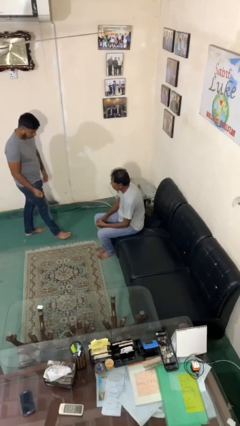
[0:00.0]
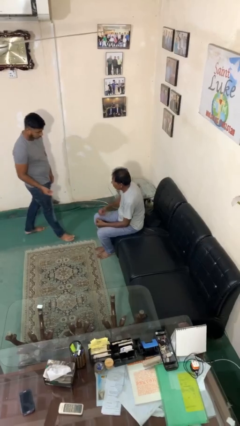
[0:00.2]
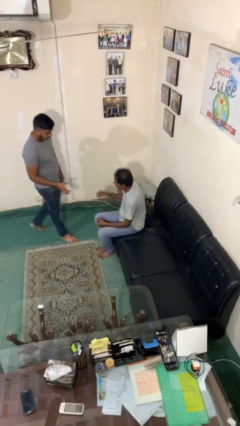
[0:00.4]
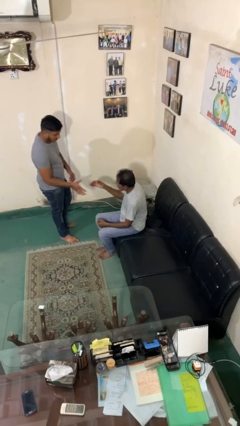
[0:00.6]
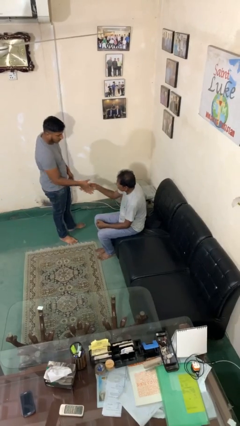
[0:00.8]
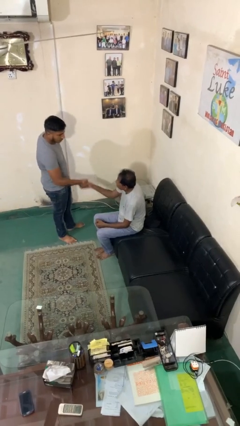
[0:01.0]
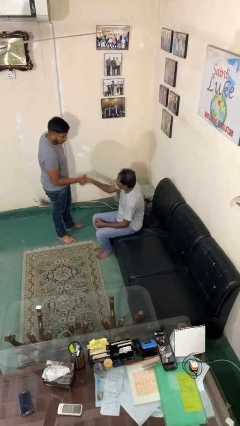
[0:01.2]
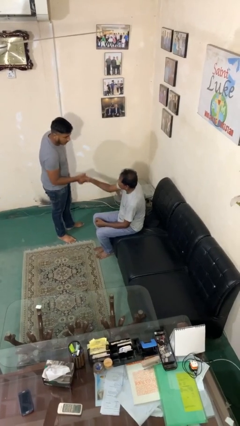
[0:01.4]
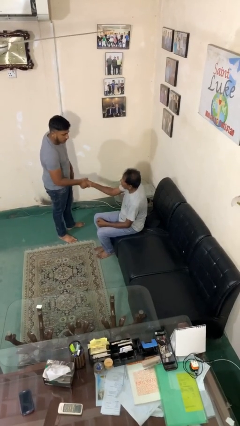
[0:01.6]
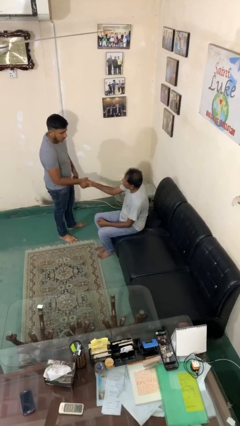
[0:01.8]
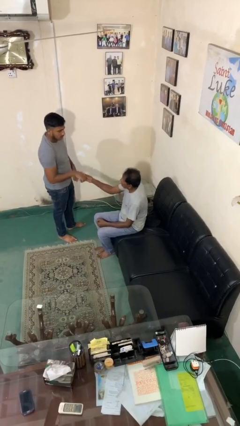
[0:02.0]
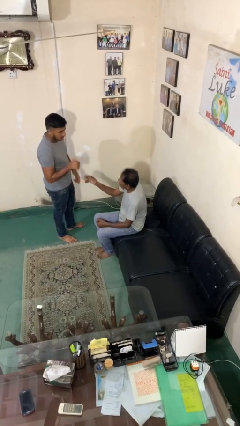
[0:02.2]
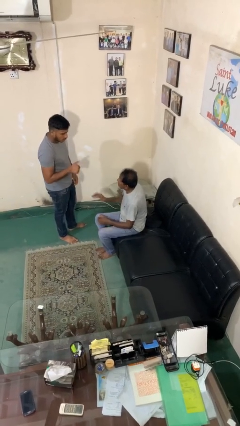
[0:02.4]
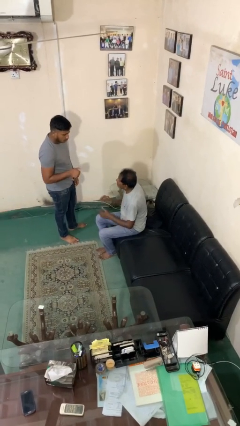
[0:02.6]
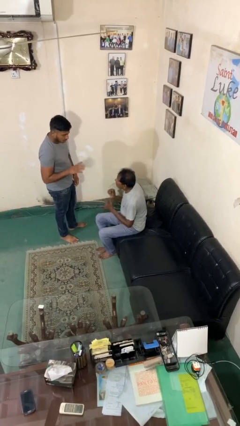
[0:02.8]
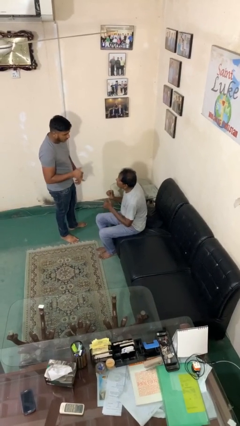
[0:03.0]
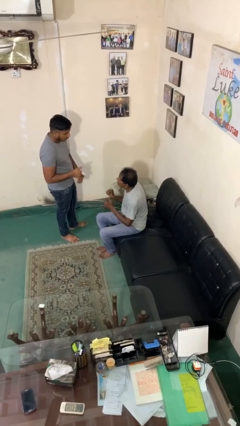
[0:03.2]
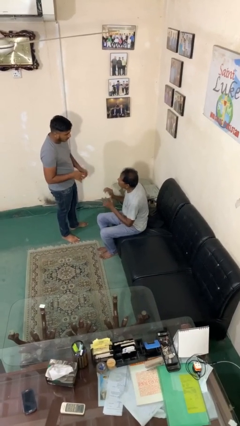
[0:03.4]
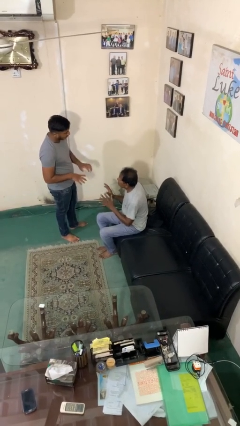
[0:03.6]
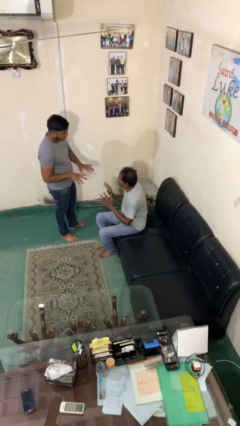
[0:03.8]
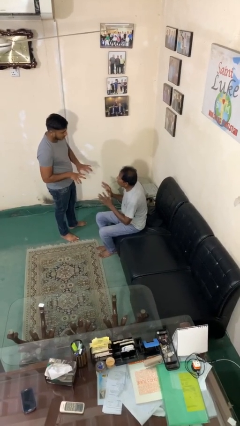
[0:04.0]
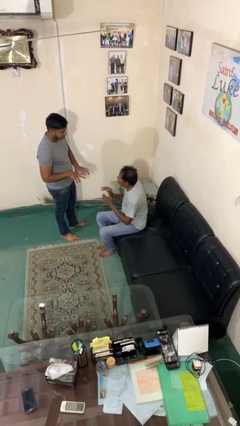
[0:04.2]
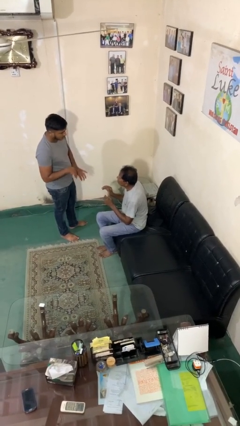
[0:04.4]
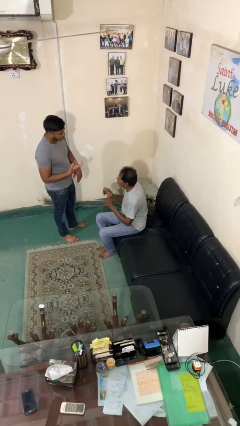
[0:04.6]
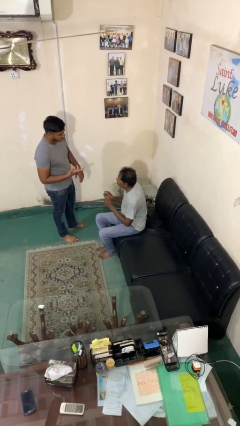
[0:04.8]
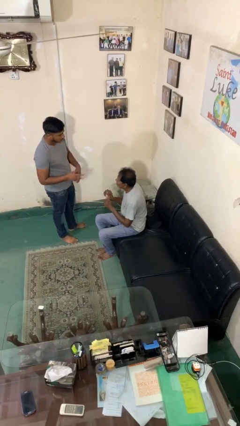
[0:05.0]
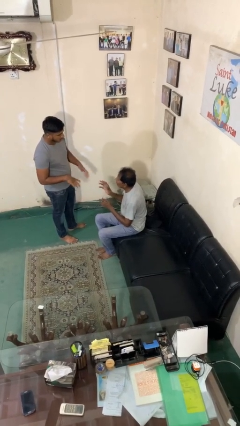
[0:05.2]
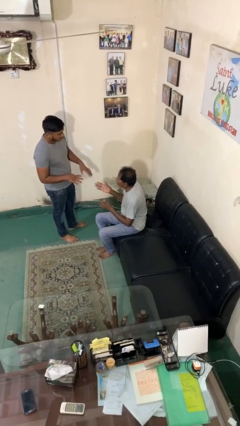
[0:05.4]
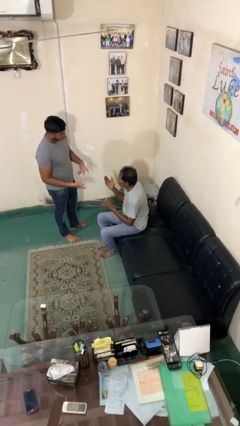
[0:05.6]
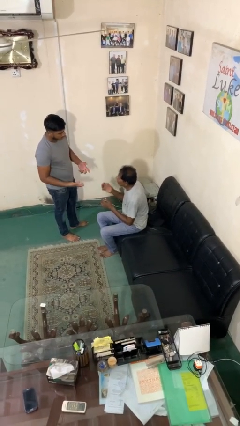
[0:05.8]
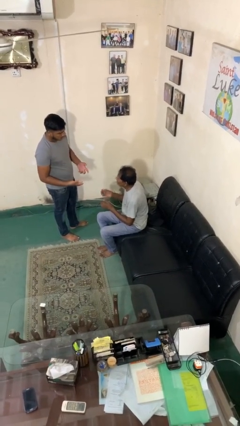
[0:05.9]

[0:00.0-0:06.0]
person shakes hand

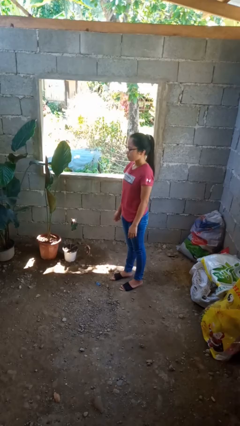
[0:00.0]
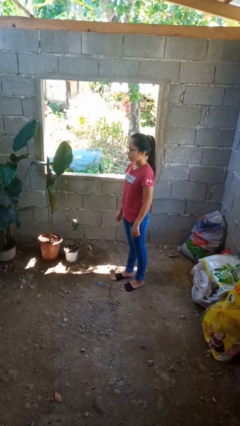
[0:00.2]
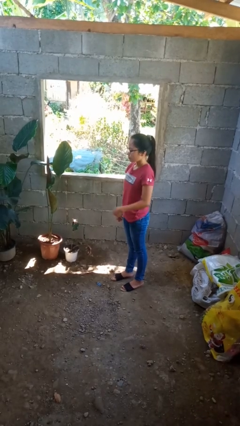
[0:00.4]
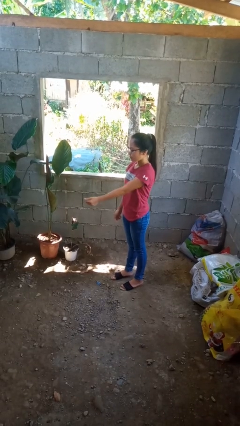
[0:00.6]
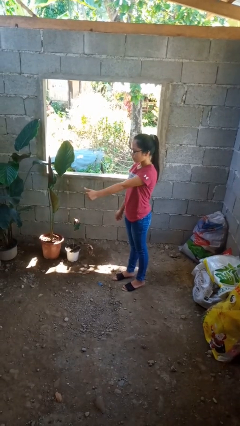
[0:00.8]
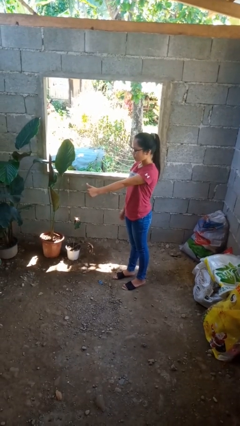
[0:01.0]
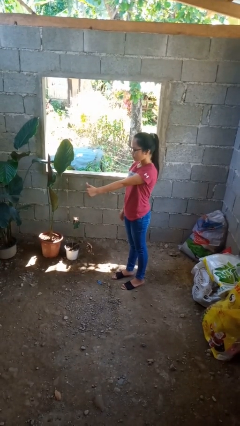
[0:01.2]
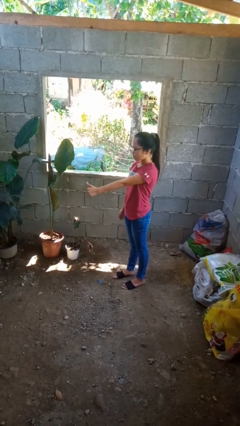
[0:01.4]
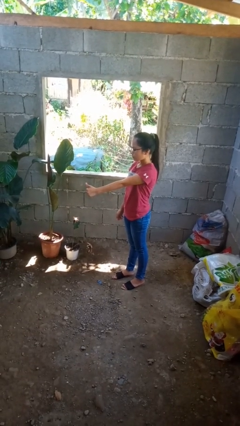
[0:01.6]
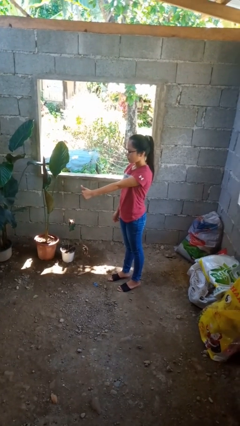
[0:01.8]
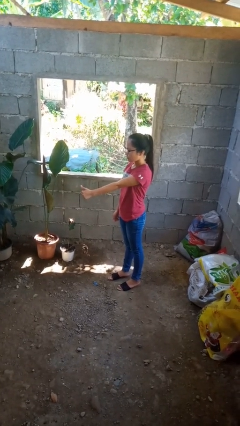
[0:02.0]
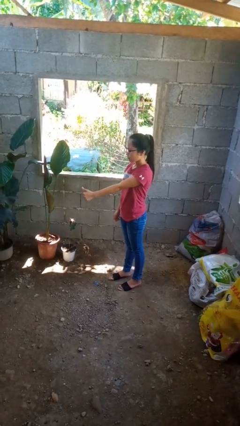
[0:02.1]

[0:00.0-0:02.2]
person gestures thumbs up

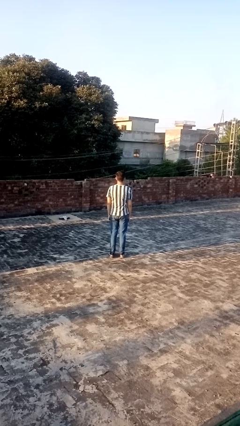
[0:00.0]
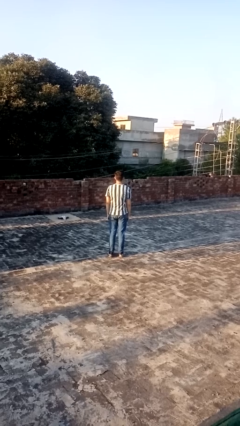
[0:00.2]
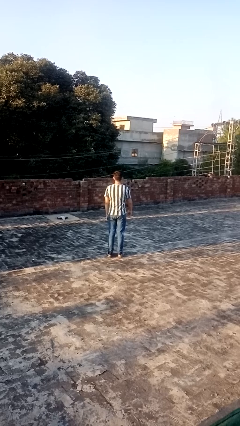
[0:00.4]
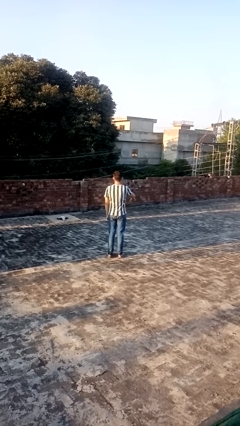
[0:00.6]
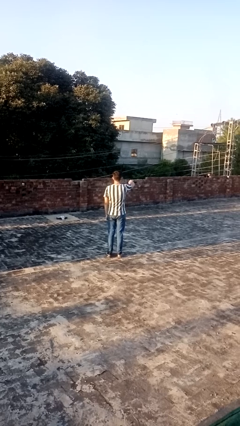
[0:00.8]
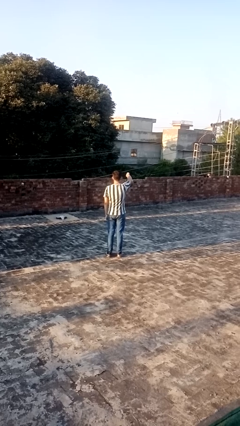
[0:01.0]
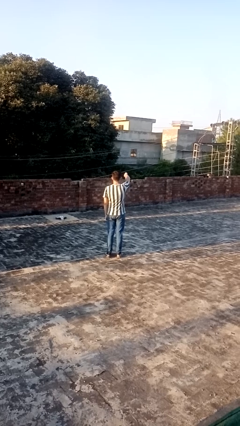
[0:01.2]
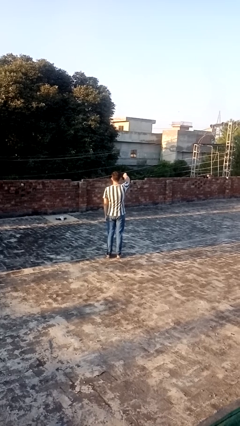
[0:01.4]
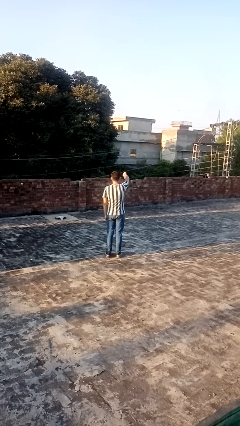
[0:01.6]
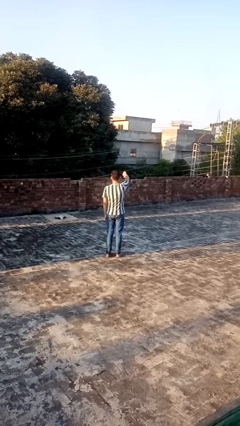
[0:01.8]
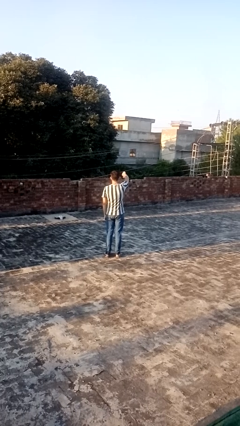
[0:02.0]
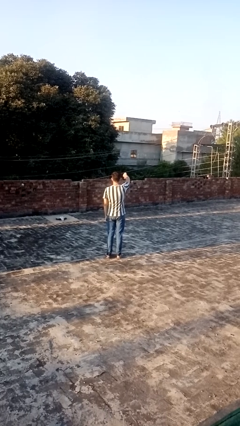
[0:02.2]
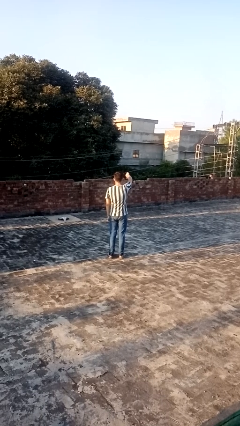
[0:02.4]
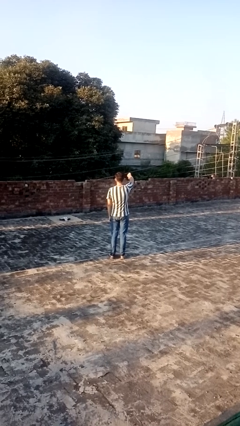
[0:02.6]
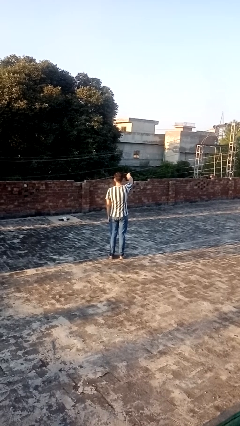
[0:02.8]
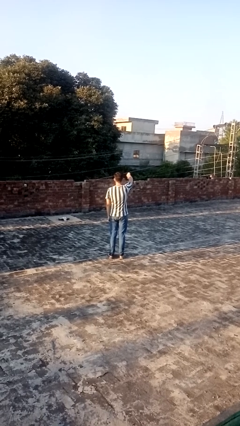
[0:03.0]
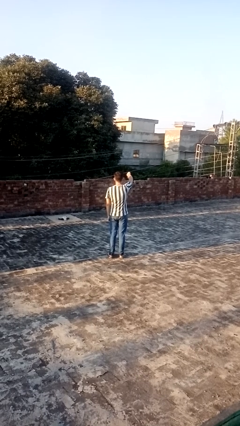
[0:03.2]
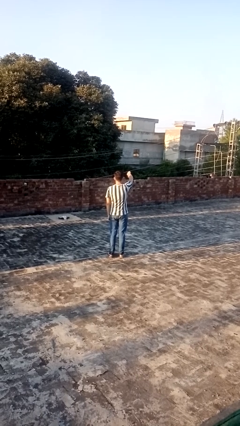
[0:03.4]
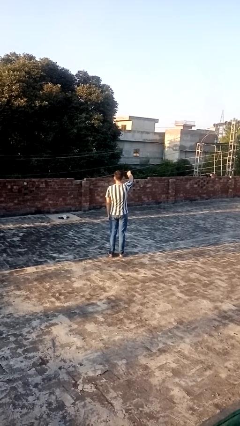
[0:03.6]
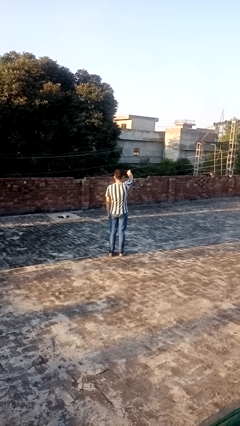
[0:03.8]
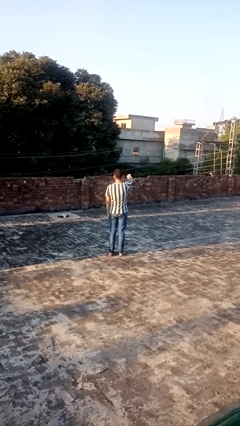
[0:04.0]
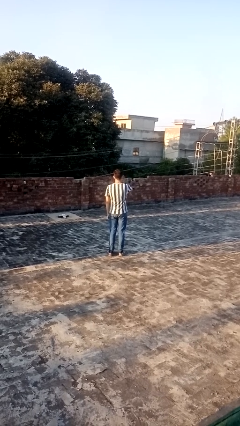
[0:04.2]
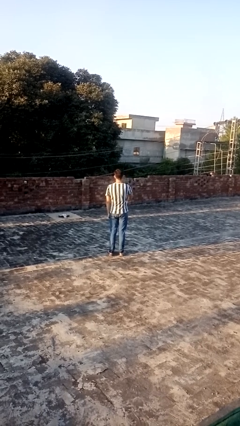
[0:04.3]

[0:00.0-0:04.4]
person gestures thumbs down

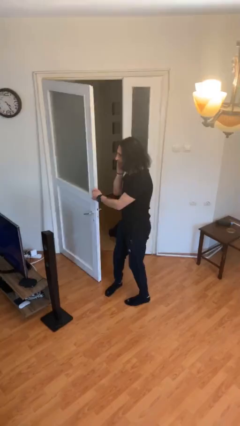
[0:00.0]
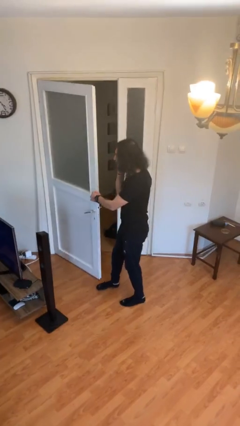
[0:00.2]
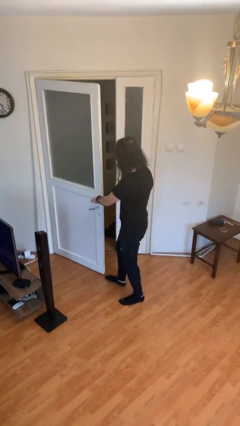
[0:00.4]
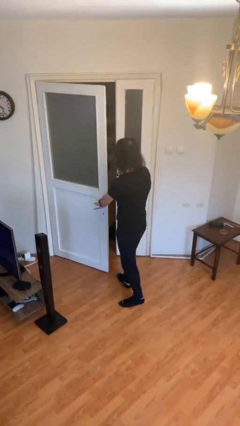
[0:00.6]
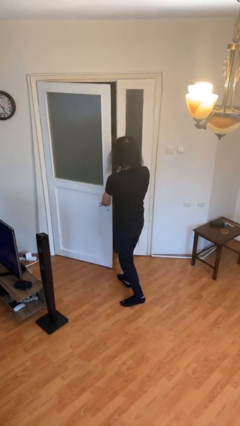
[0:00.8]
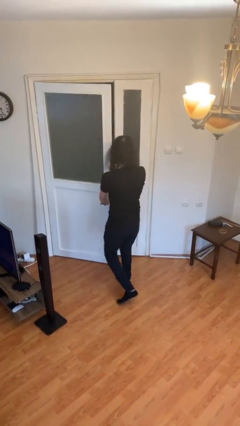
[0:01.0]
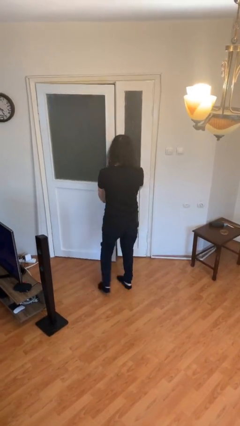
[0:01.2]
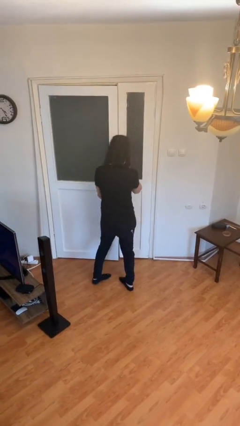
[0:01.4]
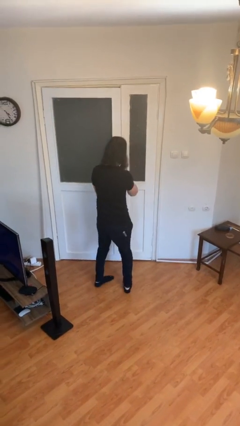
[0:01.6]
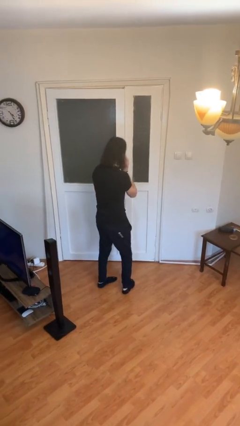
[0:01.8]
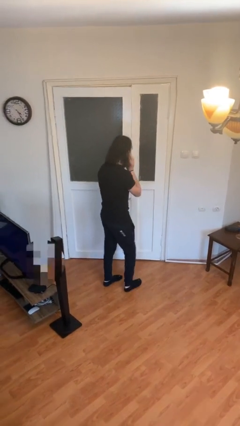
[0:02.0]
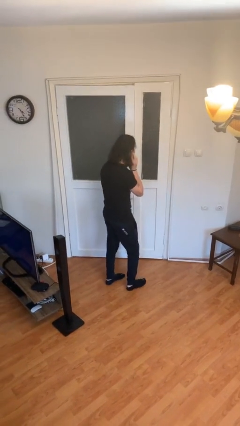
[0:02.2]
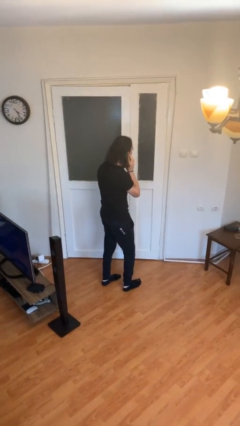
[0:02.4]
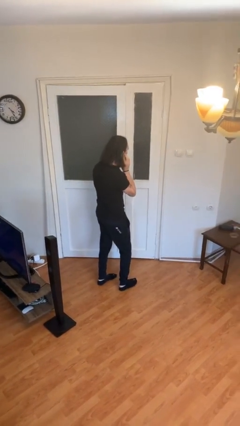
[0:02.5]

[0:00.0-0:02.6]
person closes facility door

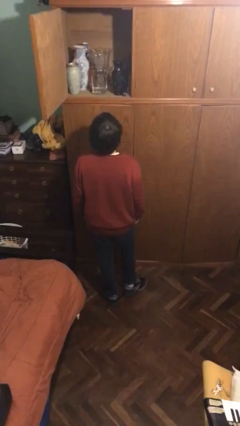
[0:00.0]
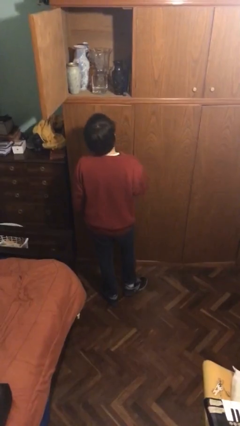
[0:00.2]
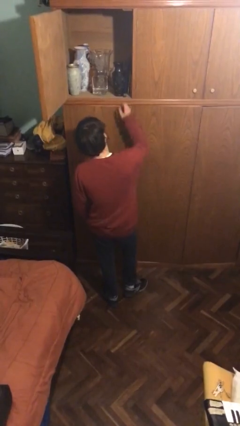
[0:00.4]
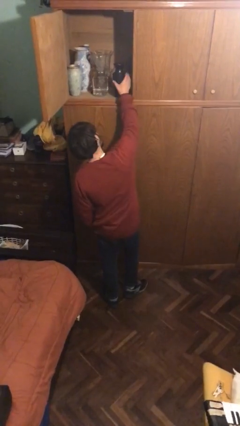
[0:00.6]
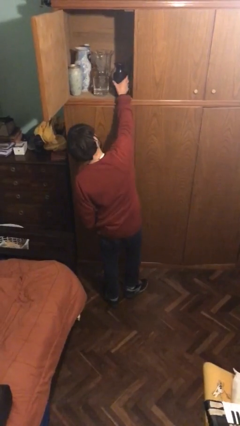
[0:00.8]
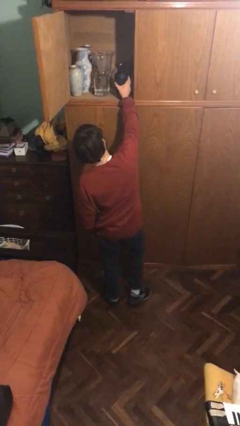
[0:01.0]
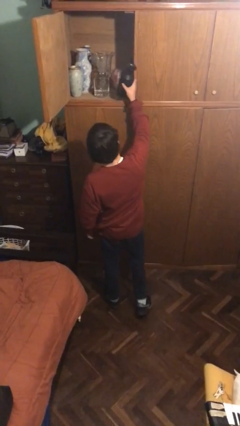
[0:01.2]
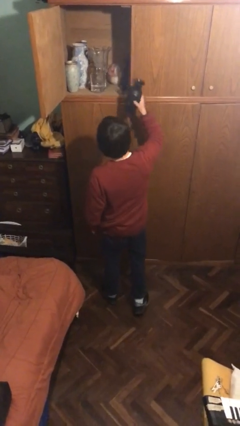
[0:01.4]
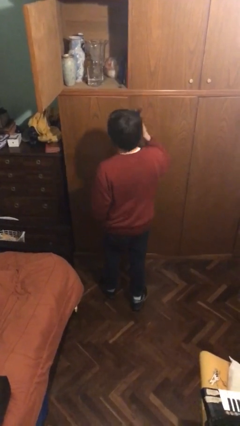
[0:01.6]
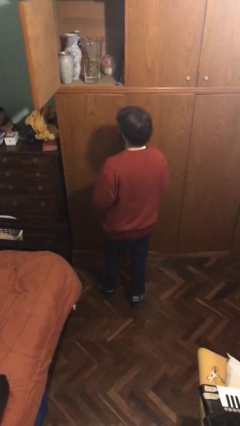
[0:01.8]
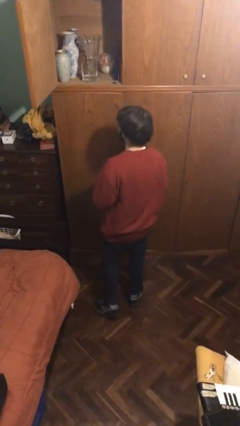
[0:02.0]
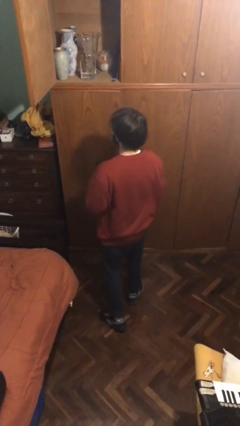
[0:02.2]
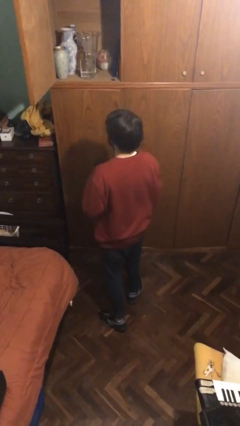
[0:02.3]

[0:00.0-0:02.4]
person picks up object from cabinet

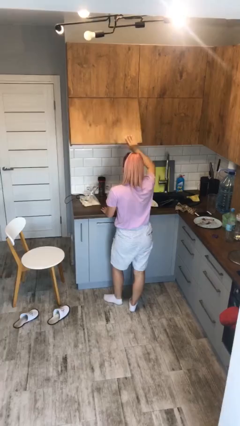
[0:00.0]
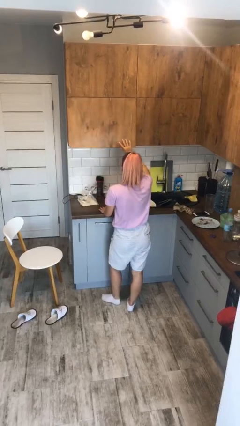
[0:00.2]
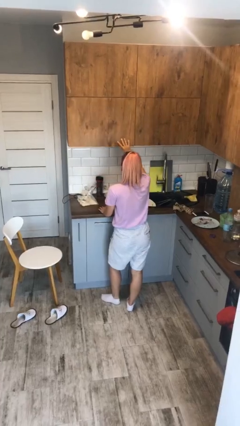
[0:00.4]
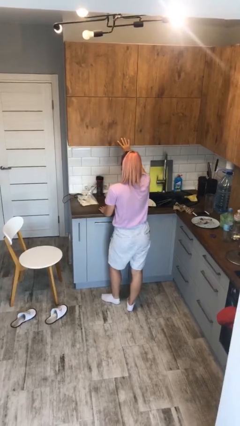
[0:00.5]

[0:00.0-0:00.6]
person closes cabinet
